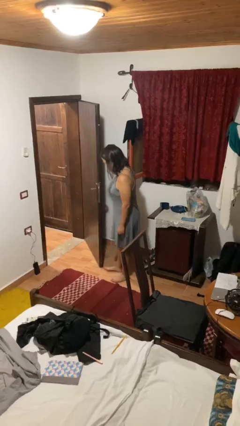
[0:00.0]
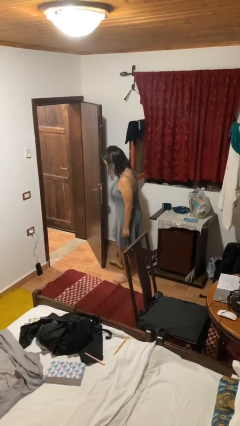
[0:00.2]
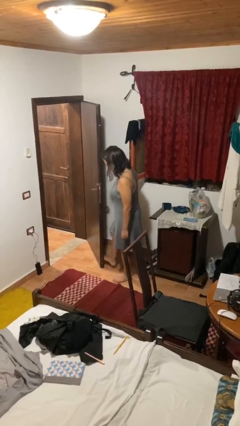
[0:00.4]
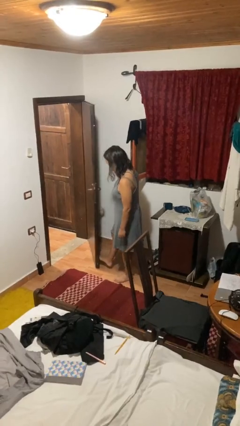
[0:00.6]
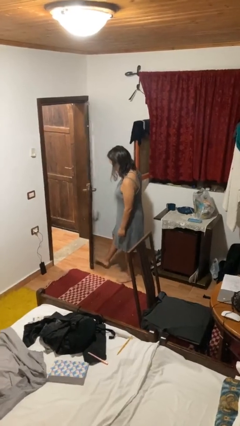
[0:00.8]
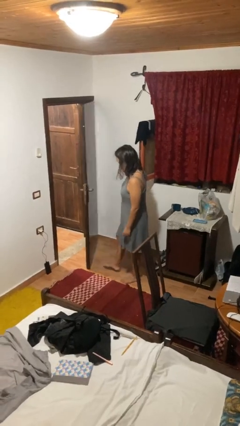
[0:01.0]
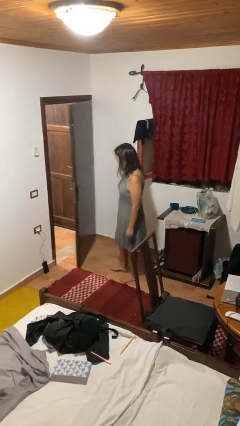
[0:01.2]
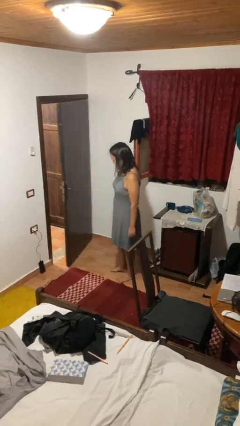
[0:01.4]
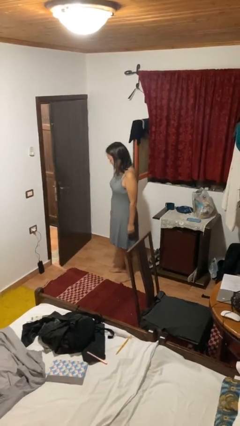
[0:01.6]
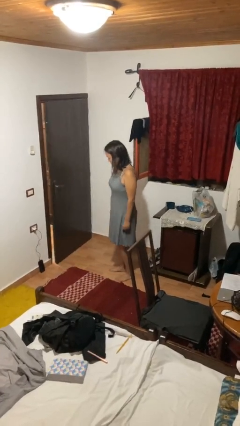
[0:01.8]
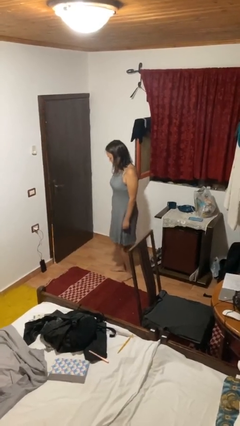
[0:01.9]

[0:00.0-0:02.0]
person closes door with foot

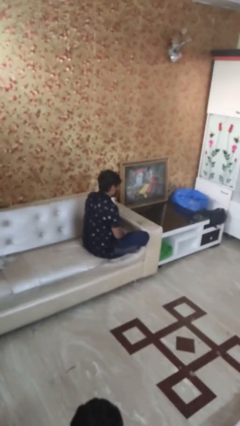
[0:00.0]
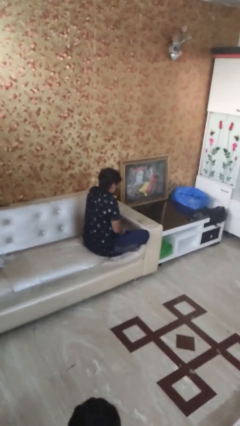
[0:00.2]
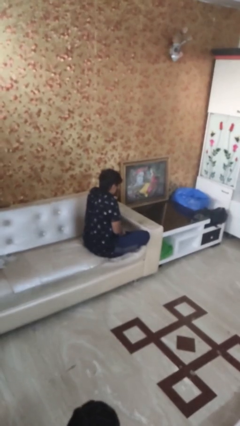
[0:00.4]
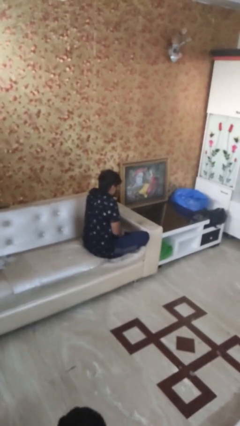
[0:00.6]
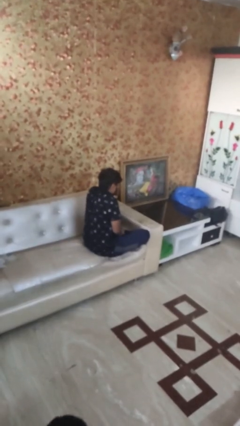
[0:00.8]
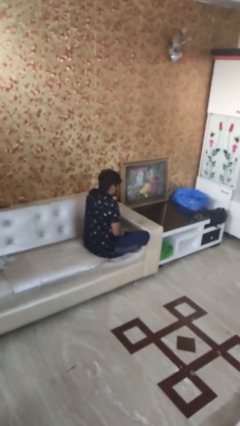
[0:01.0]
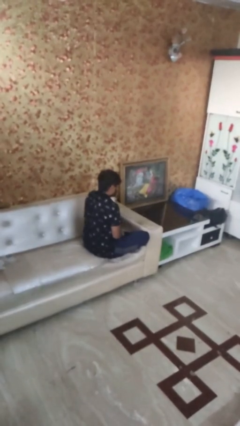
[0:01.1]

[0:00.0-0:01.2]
person shrugs

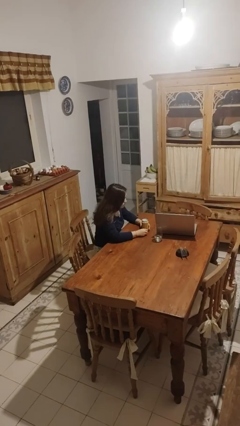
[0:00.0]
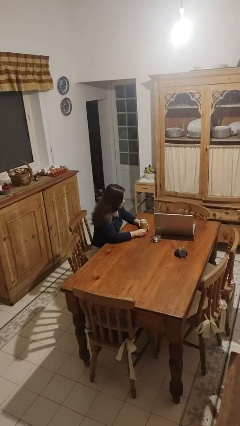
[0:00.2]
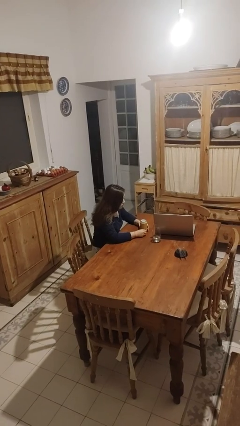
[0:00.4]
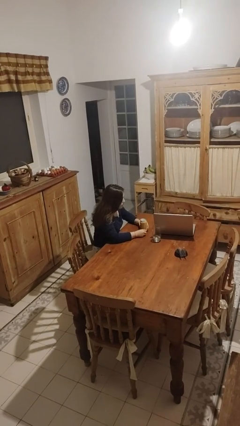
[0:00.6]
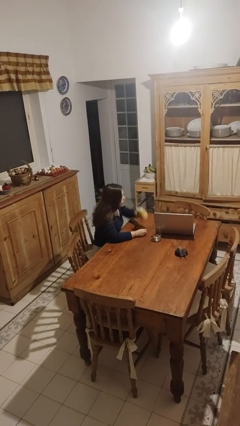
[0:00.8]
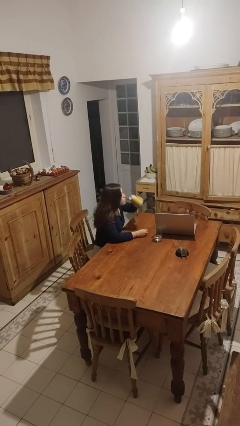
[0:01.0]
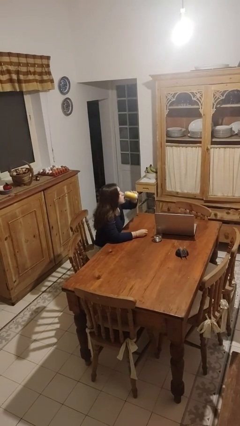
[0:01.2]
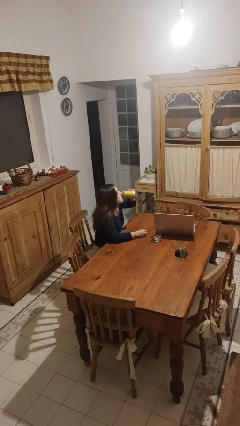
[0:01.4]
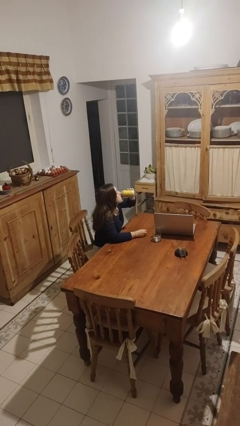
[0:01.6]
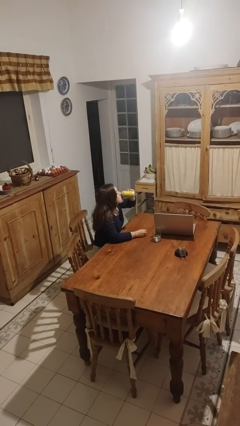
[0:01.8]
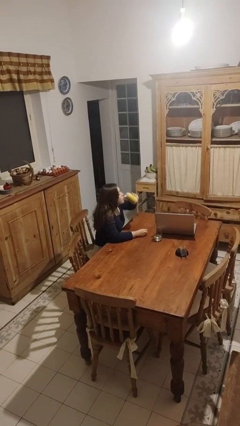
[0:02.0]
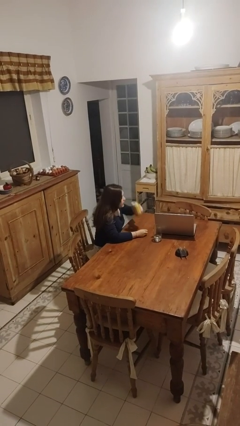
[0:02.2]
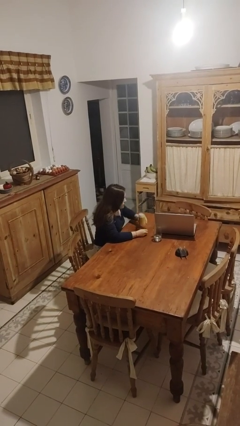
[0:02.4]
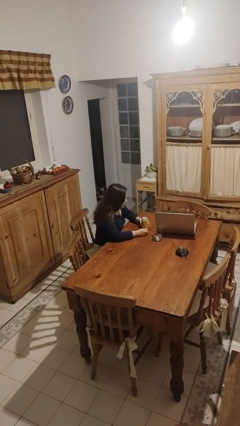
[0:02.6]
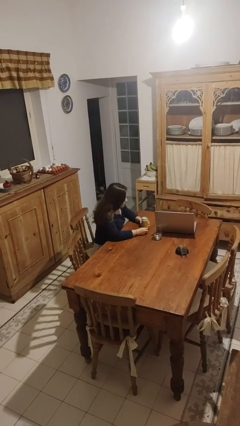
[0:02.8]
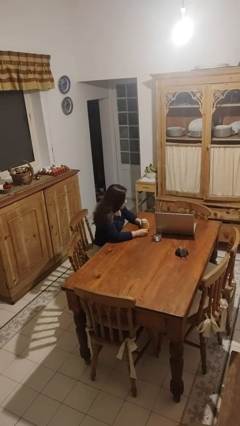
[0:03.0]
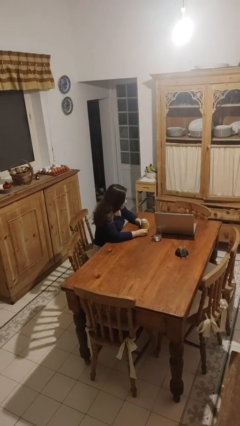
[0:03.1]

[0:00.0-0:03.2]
person drinks from beverage can

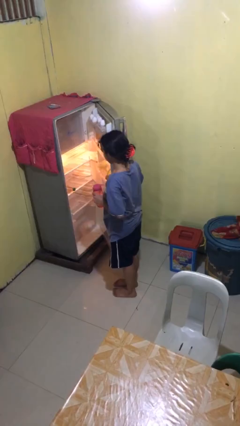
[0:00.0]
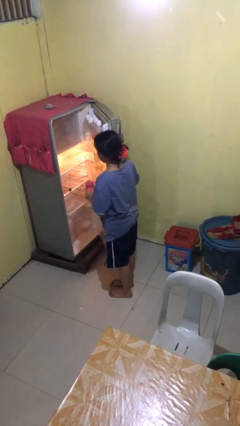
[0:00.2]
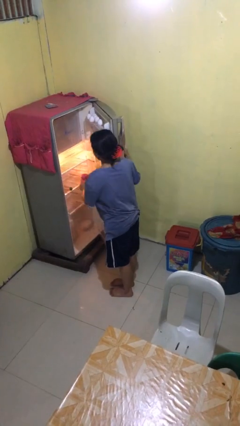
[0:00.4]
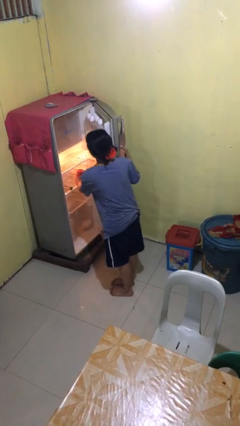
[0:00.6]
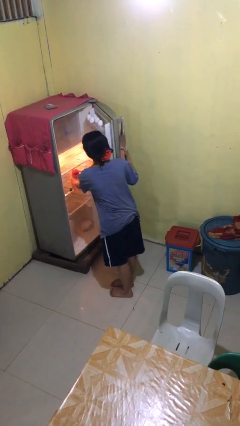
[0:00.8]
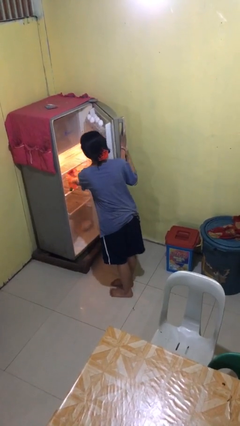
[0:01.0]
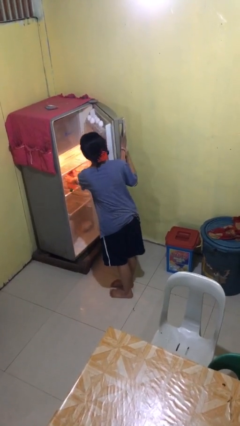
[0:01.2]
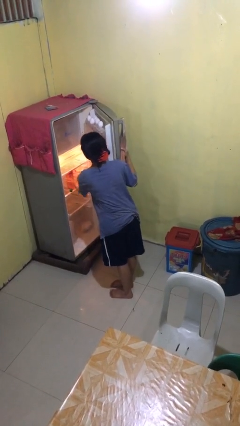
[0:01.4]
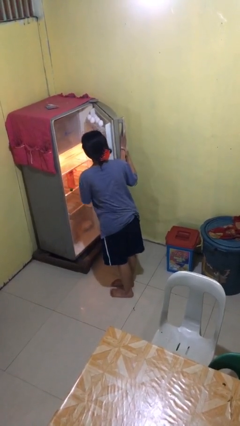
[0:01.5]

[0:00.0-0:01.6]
person puts object into refrigerator

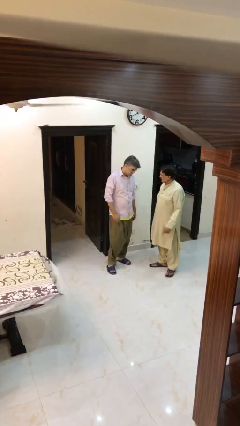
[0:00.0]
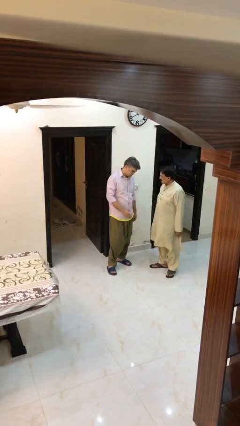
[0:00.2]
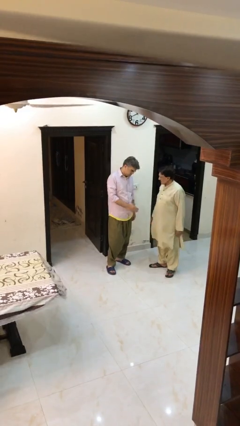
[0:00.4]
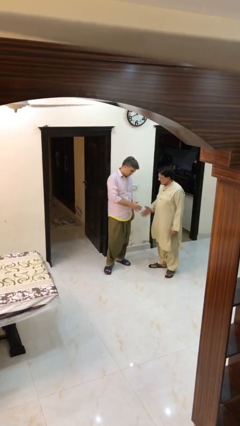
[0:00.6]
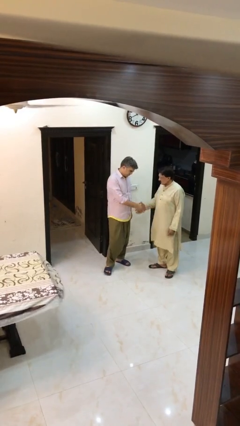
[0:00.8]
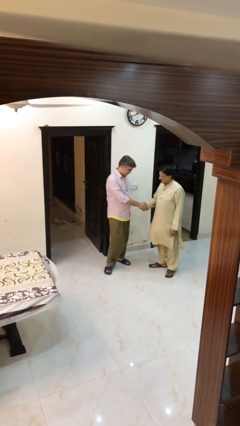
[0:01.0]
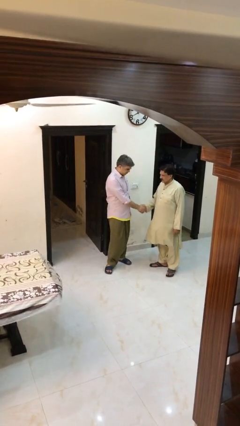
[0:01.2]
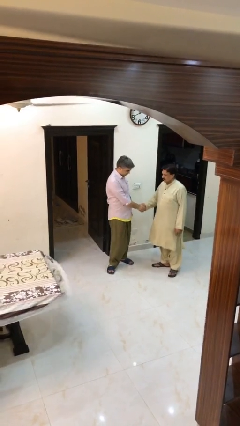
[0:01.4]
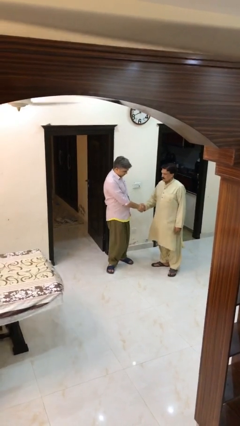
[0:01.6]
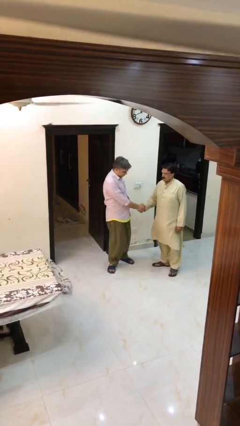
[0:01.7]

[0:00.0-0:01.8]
person shakes hand

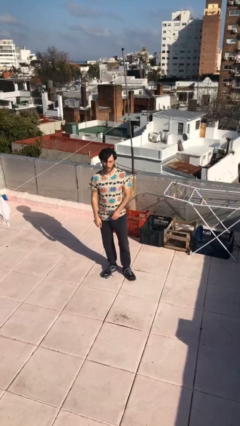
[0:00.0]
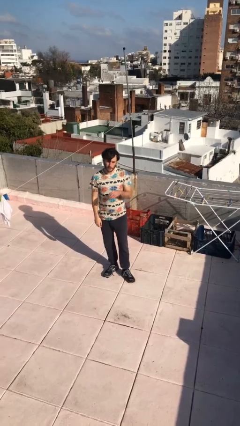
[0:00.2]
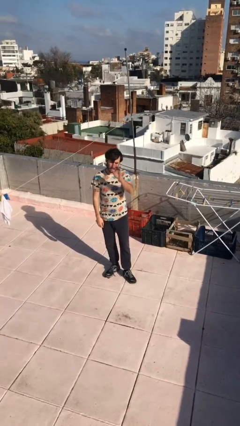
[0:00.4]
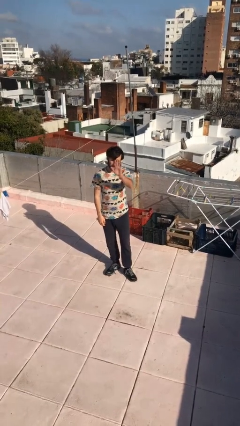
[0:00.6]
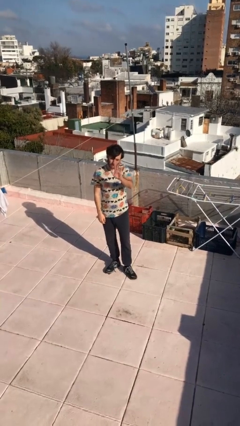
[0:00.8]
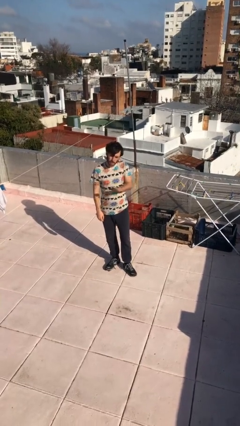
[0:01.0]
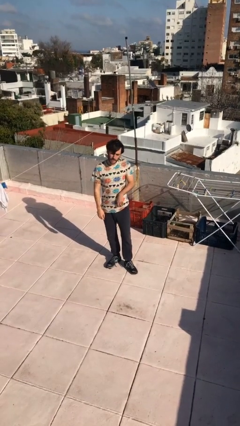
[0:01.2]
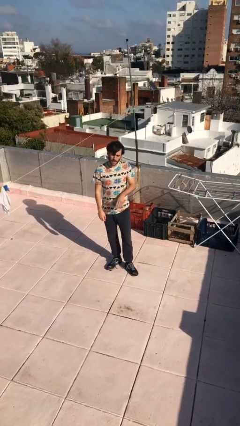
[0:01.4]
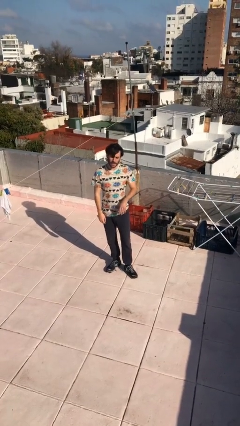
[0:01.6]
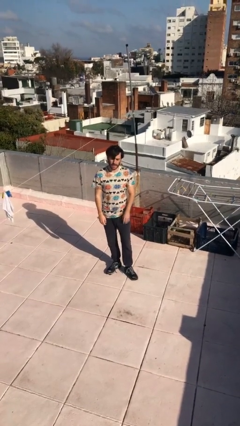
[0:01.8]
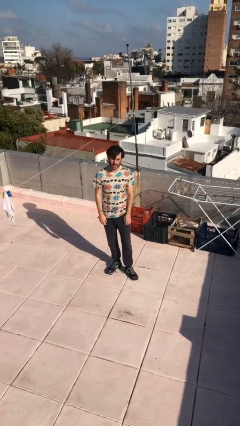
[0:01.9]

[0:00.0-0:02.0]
person gestures swipe down

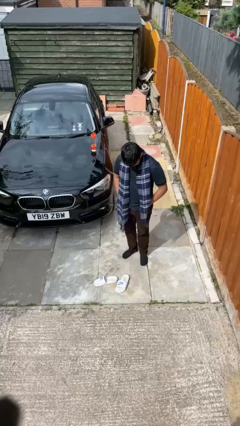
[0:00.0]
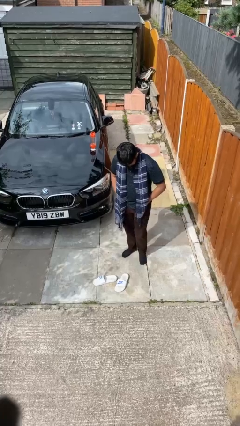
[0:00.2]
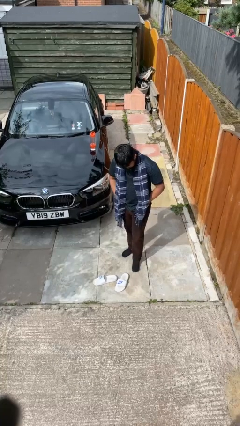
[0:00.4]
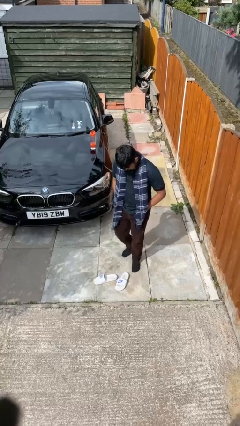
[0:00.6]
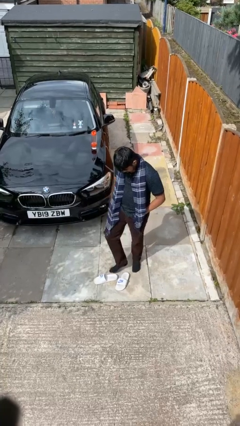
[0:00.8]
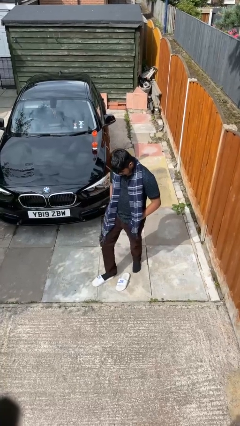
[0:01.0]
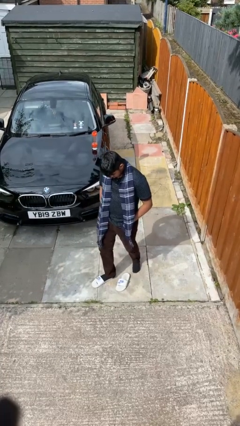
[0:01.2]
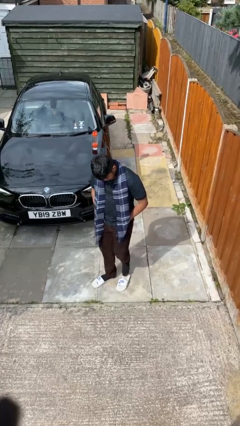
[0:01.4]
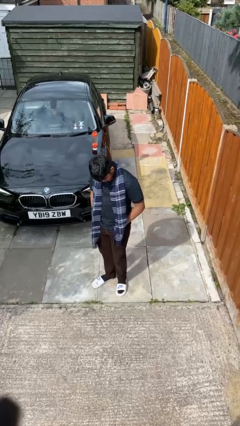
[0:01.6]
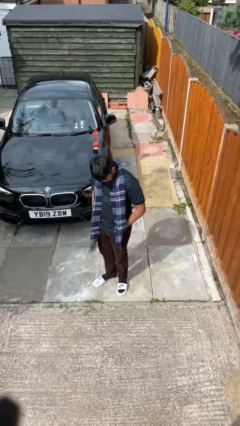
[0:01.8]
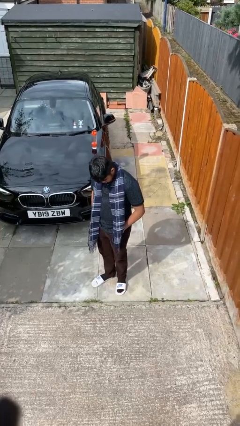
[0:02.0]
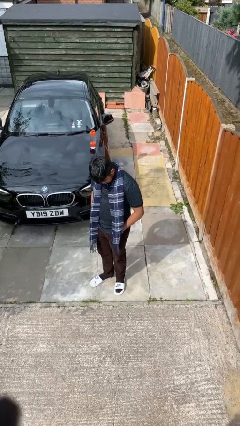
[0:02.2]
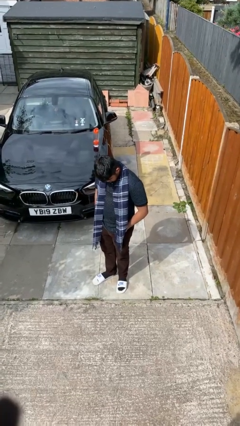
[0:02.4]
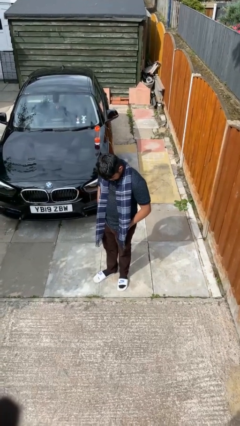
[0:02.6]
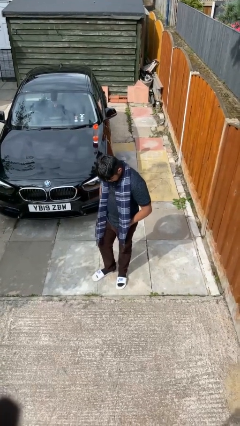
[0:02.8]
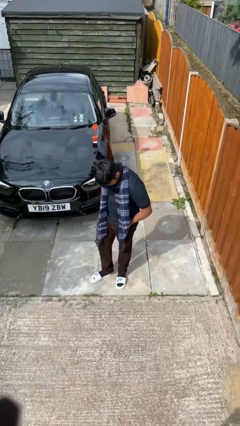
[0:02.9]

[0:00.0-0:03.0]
person puts on shoes

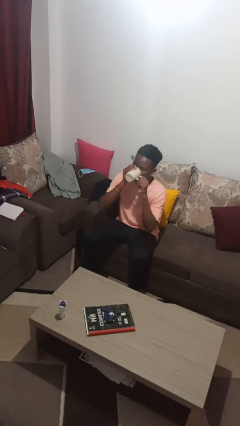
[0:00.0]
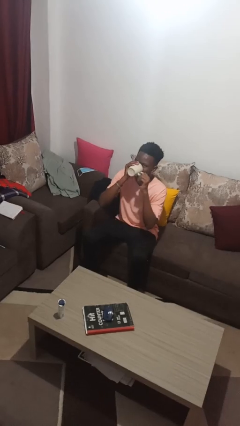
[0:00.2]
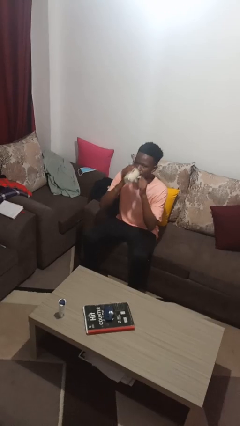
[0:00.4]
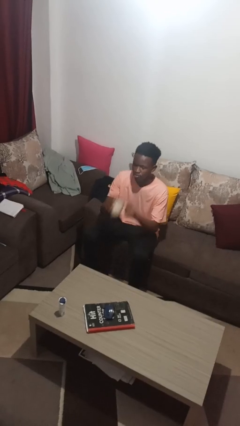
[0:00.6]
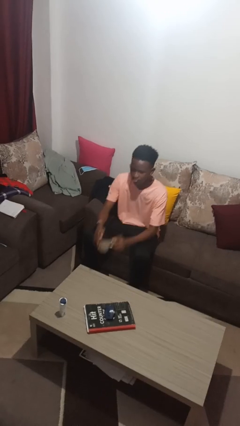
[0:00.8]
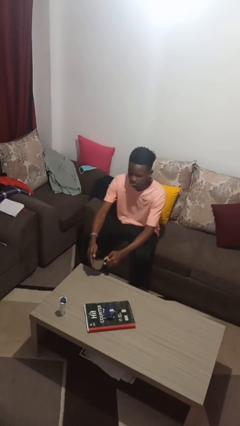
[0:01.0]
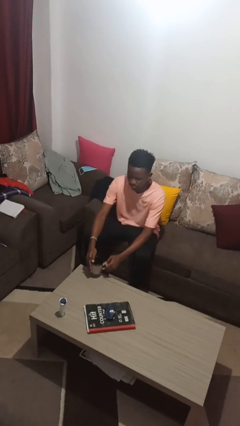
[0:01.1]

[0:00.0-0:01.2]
person drinks from mug

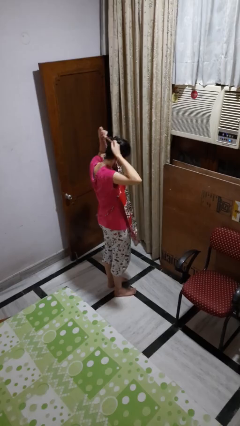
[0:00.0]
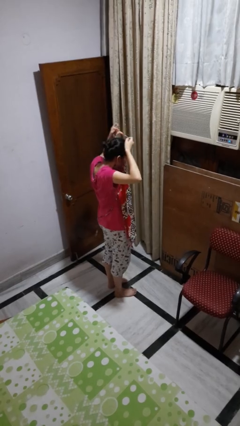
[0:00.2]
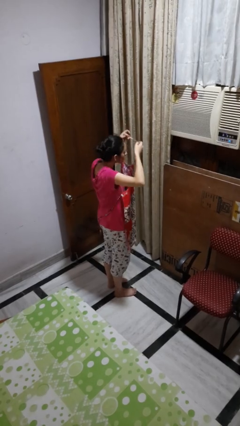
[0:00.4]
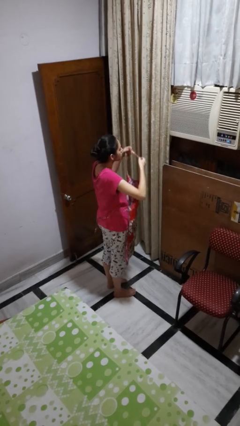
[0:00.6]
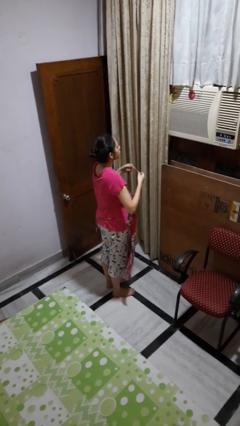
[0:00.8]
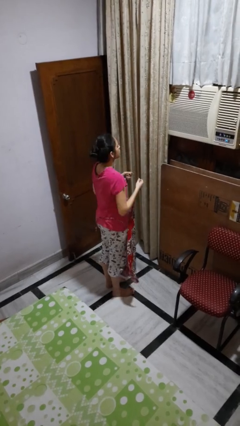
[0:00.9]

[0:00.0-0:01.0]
person takes off apron
